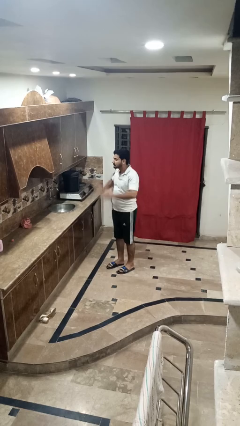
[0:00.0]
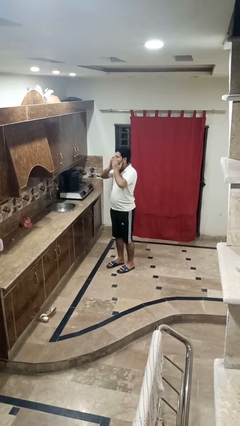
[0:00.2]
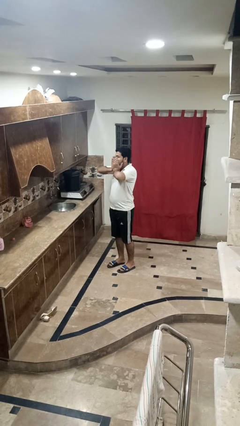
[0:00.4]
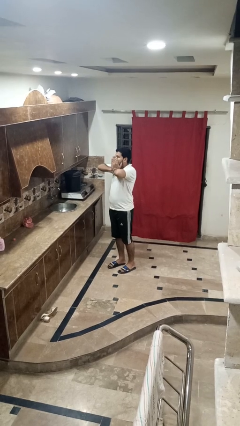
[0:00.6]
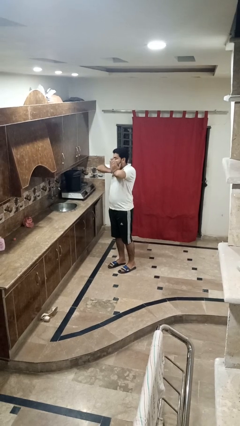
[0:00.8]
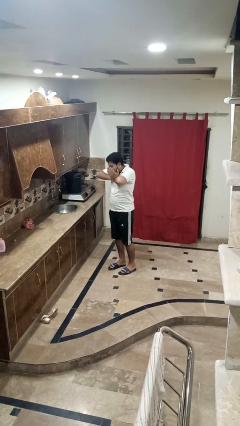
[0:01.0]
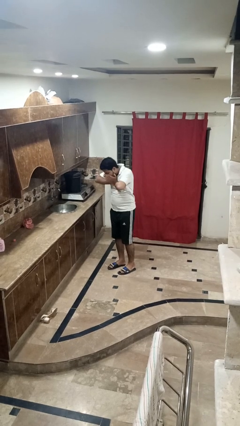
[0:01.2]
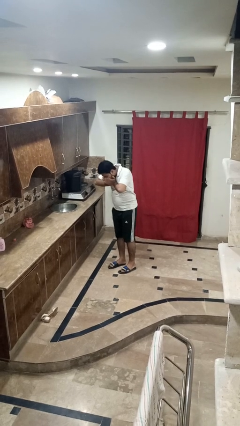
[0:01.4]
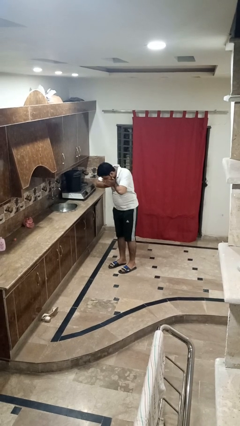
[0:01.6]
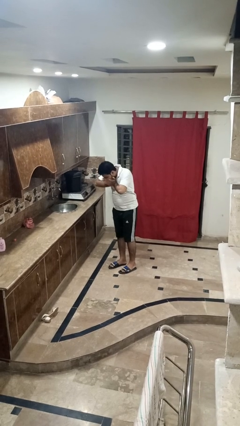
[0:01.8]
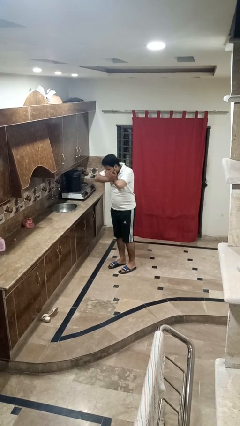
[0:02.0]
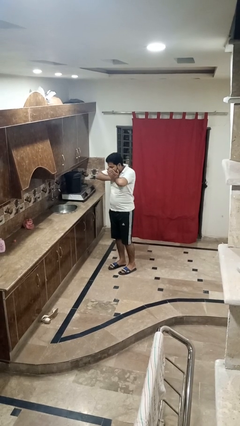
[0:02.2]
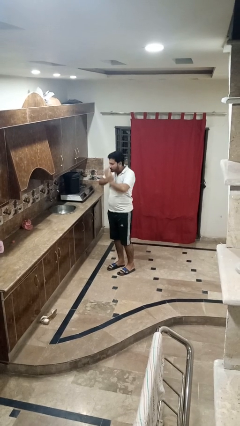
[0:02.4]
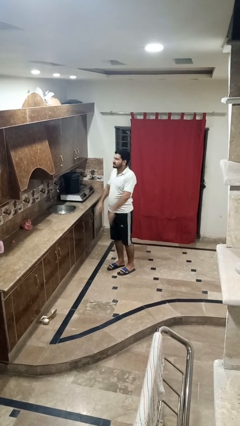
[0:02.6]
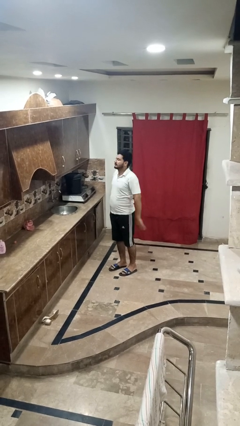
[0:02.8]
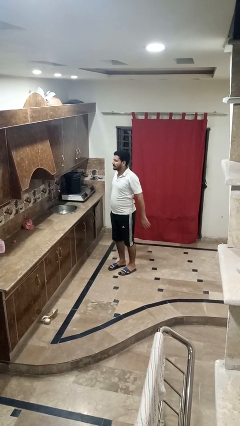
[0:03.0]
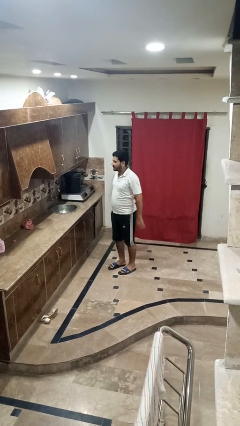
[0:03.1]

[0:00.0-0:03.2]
person sneezes into hand

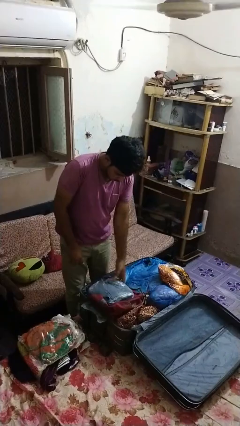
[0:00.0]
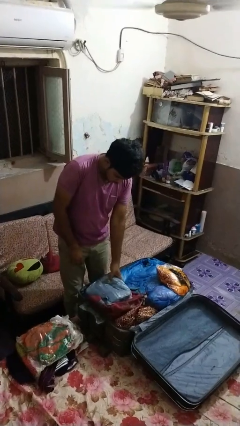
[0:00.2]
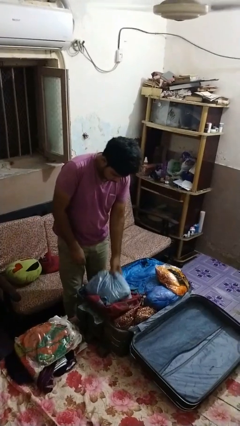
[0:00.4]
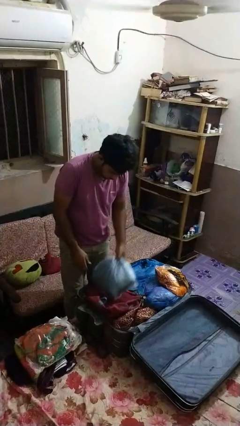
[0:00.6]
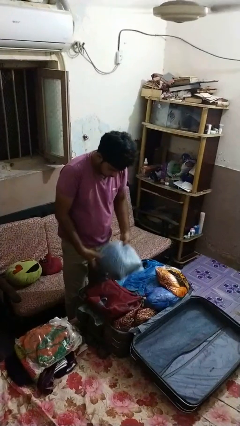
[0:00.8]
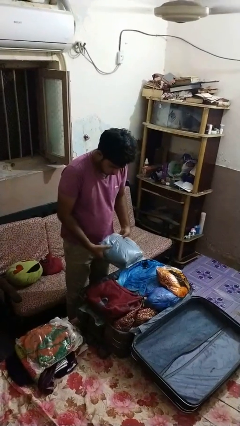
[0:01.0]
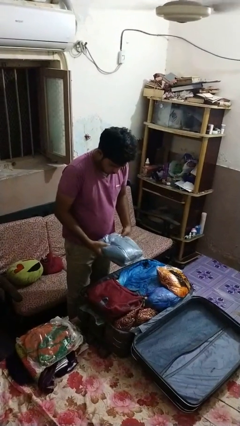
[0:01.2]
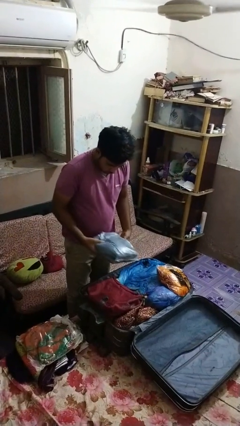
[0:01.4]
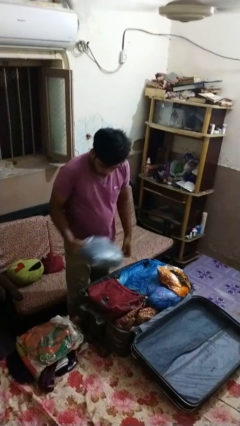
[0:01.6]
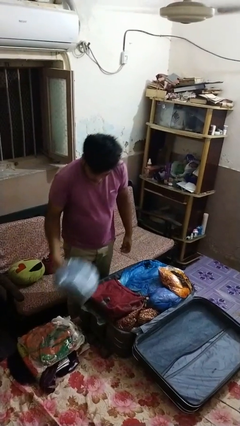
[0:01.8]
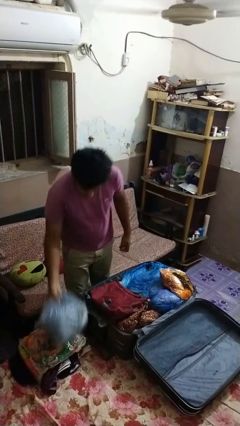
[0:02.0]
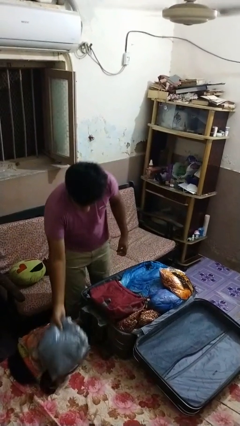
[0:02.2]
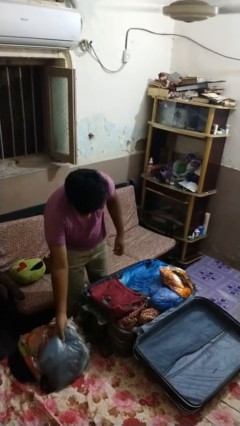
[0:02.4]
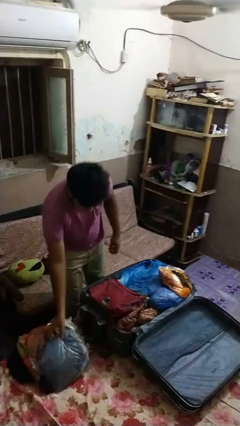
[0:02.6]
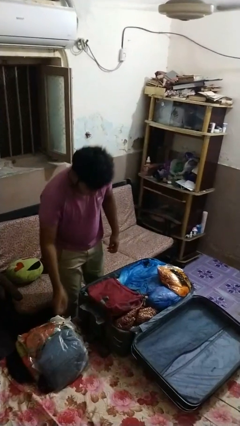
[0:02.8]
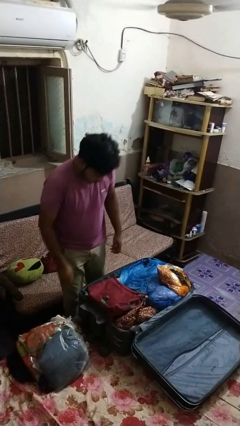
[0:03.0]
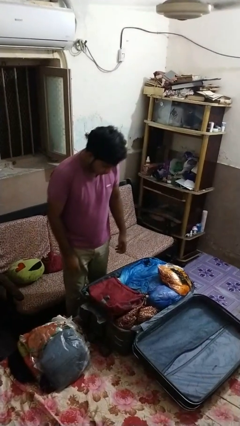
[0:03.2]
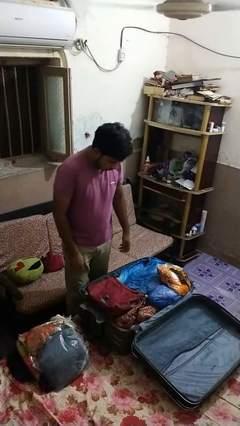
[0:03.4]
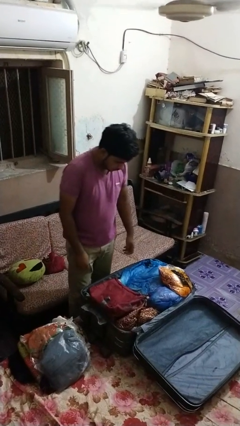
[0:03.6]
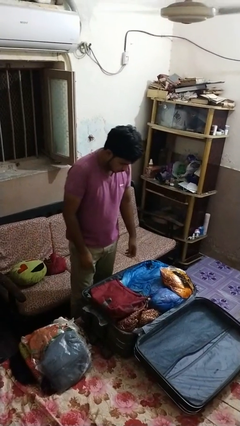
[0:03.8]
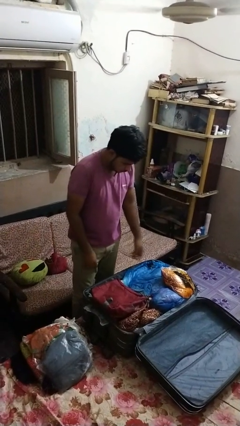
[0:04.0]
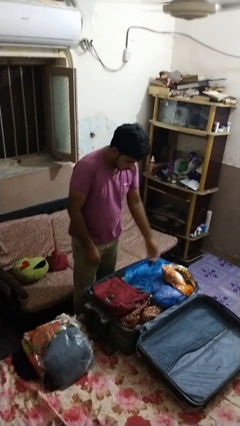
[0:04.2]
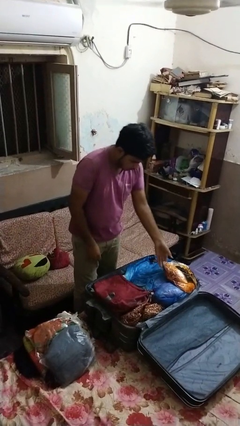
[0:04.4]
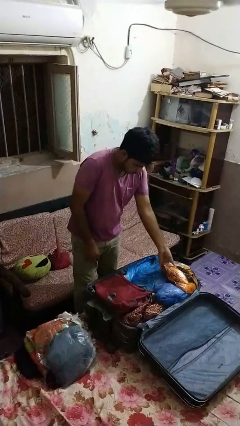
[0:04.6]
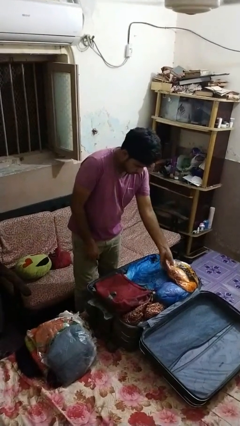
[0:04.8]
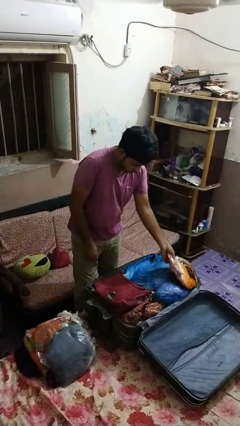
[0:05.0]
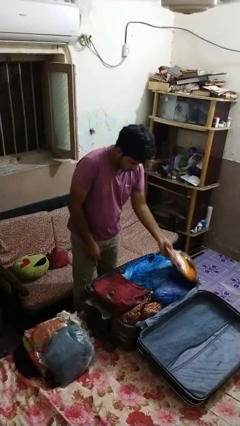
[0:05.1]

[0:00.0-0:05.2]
person unloads clothes from suitcase

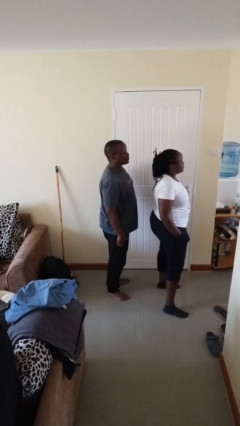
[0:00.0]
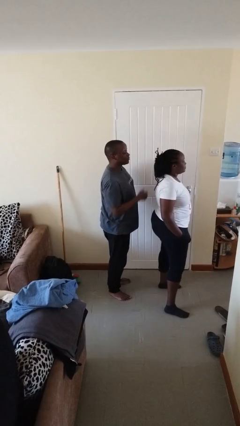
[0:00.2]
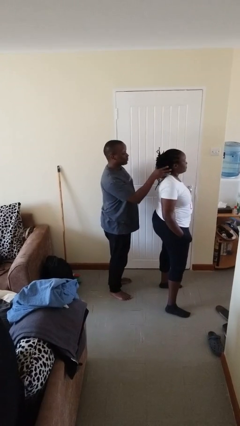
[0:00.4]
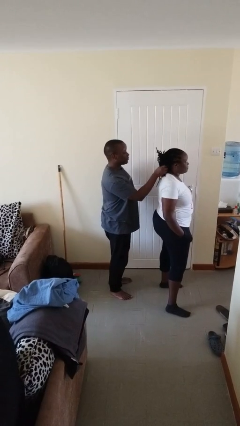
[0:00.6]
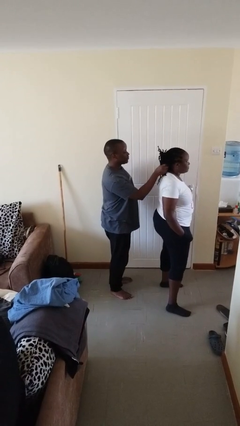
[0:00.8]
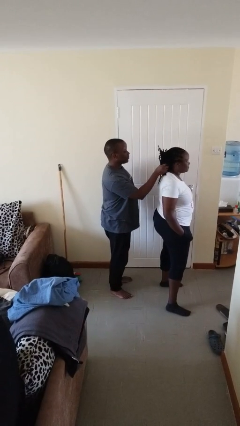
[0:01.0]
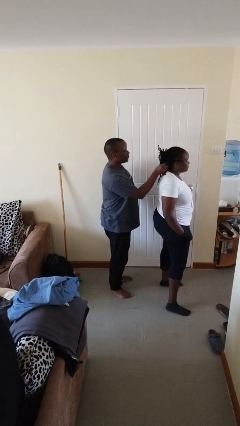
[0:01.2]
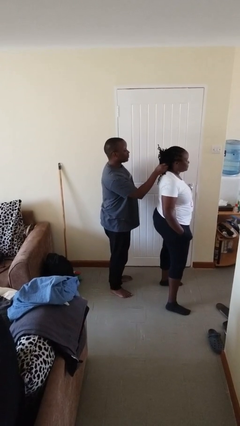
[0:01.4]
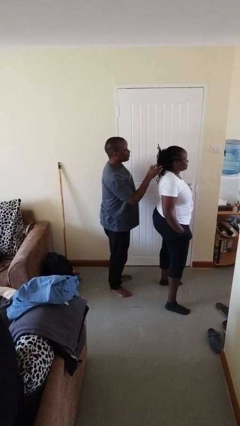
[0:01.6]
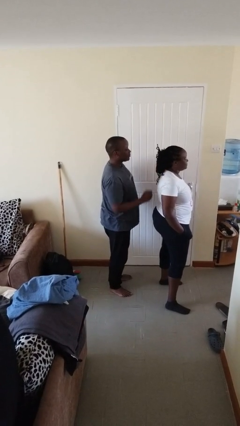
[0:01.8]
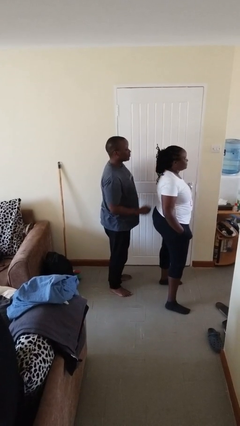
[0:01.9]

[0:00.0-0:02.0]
person grabs person by hair

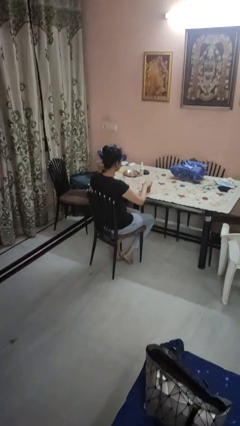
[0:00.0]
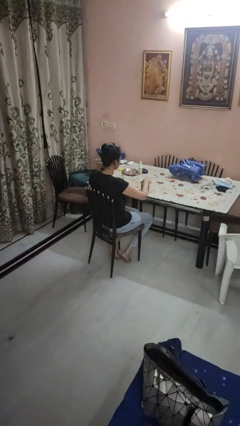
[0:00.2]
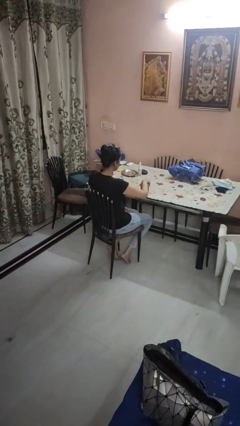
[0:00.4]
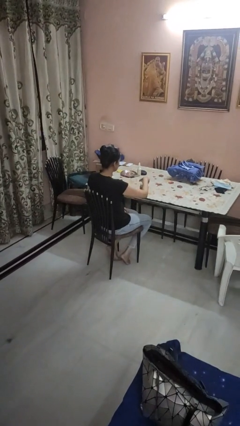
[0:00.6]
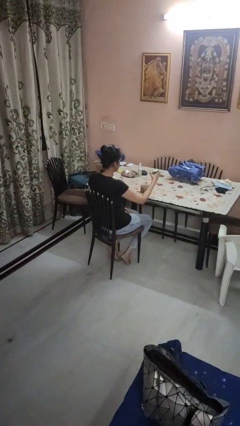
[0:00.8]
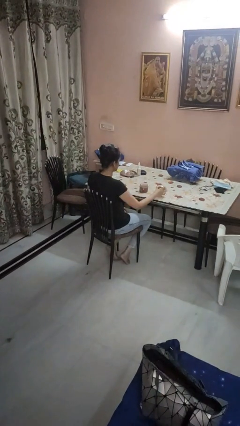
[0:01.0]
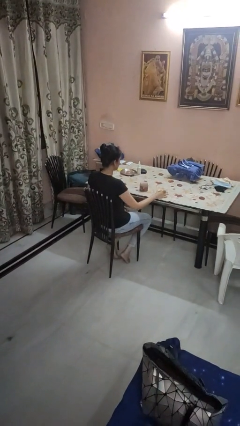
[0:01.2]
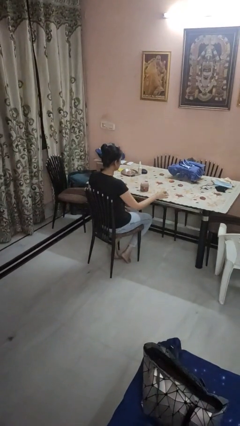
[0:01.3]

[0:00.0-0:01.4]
person opens jar

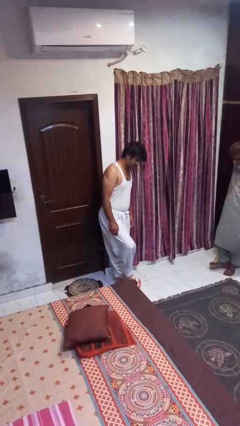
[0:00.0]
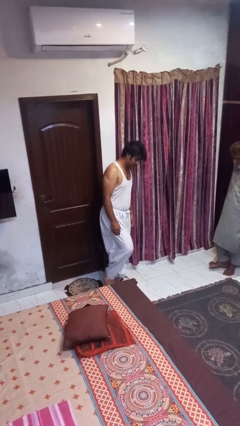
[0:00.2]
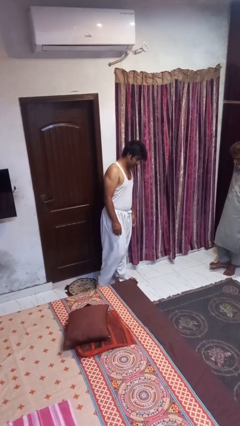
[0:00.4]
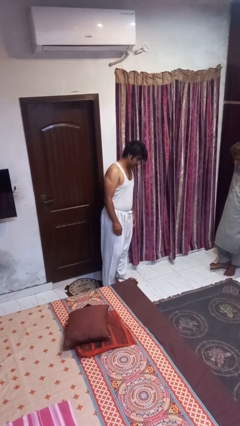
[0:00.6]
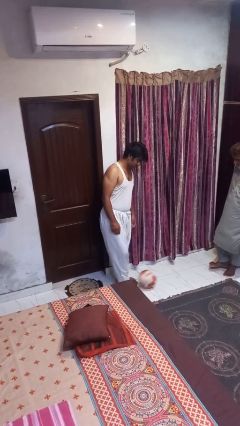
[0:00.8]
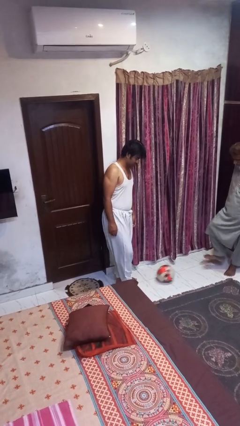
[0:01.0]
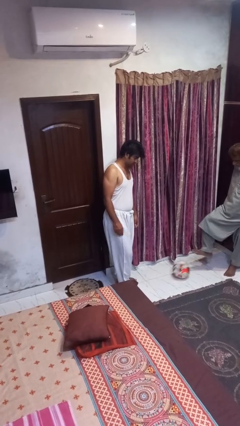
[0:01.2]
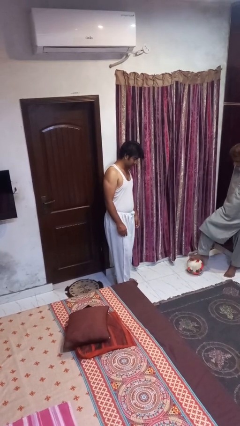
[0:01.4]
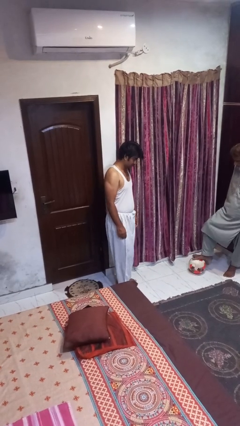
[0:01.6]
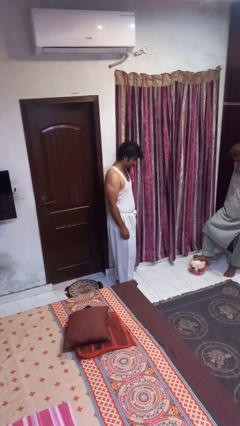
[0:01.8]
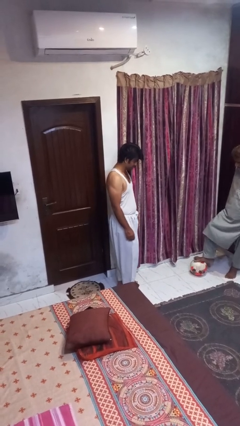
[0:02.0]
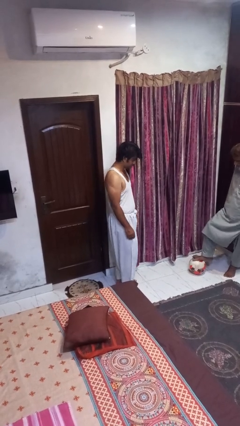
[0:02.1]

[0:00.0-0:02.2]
person kicks object to person

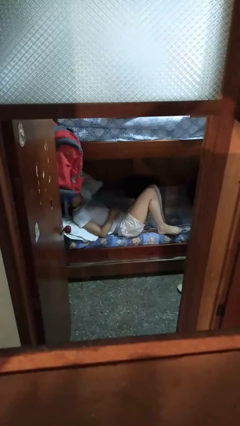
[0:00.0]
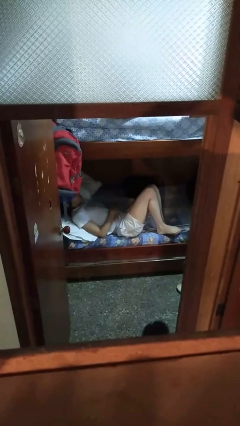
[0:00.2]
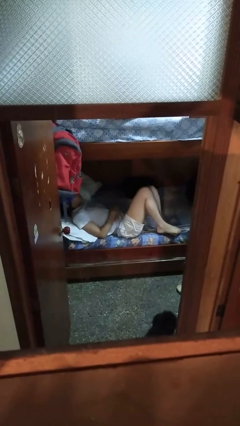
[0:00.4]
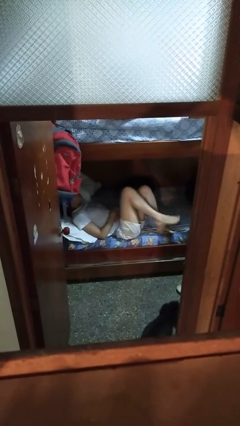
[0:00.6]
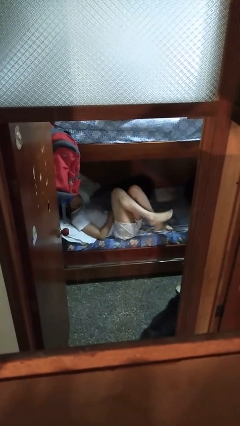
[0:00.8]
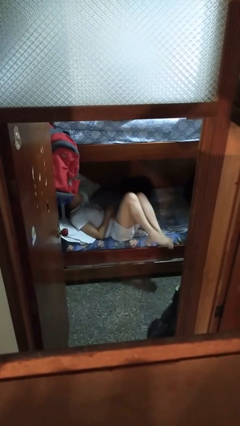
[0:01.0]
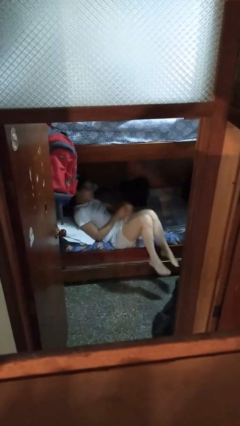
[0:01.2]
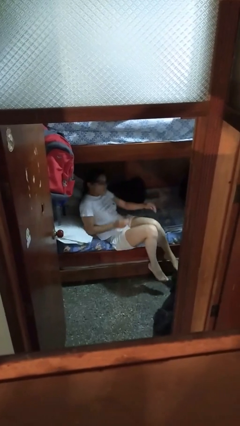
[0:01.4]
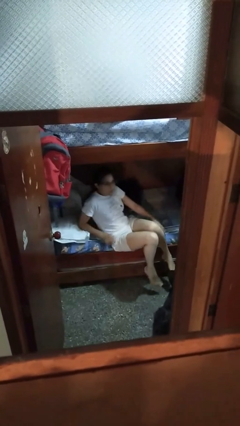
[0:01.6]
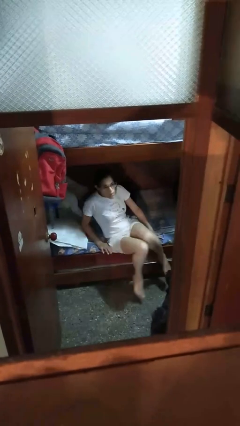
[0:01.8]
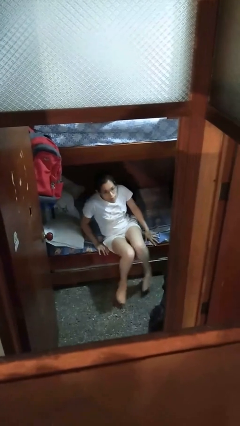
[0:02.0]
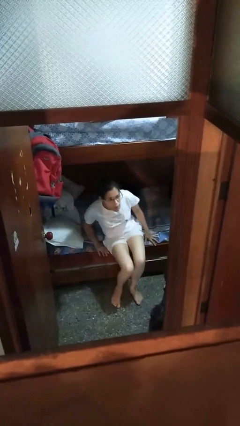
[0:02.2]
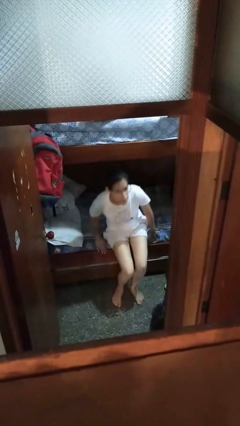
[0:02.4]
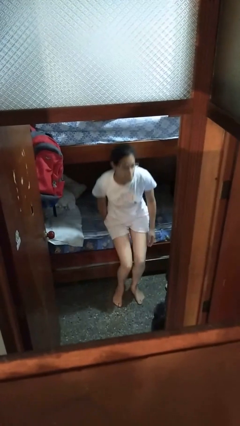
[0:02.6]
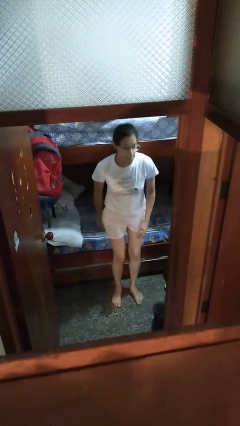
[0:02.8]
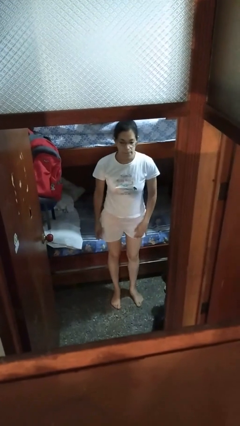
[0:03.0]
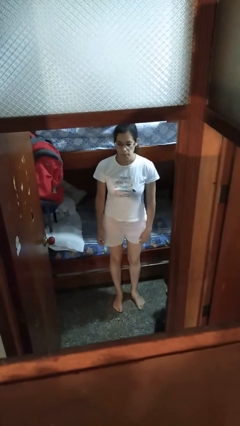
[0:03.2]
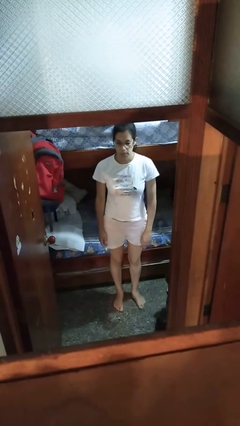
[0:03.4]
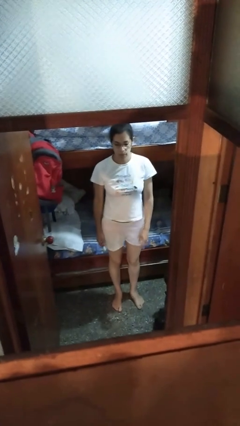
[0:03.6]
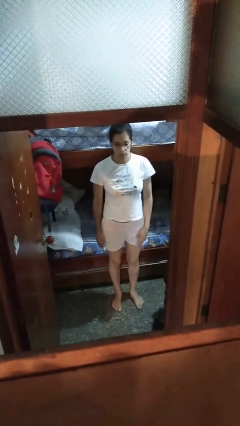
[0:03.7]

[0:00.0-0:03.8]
person stands up
